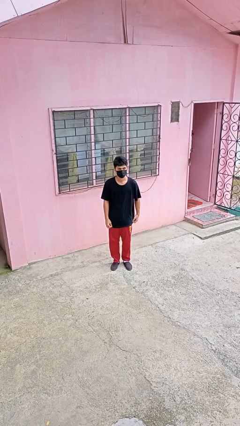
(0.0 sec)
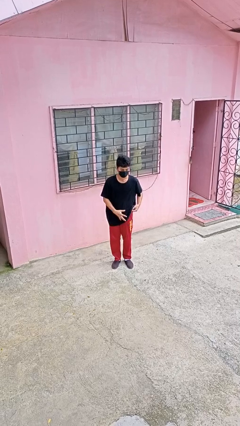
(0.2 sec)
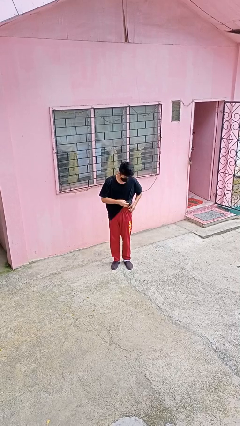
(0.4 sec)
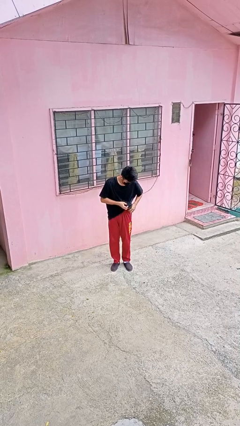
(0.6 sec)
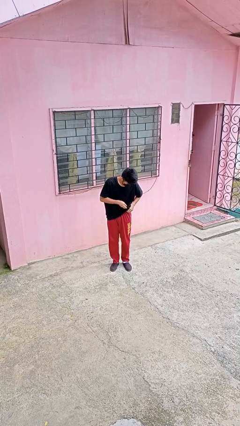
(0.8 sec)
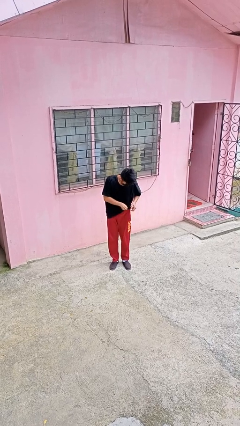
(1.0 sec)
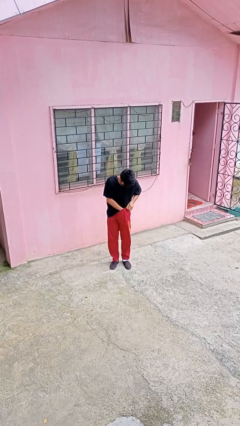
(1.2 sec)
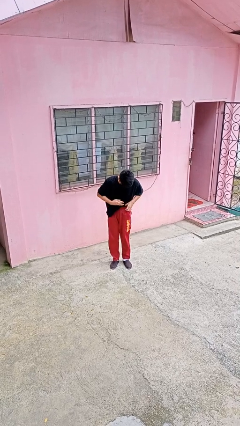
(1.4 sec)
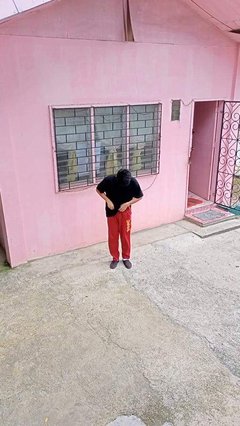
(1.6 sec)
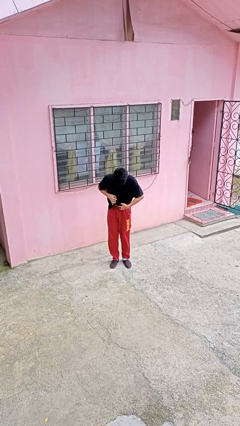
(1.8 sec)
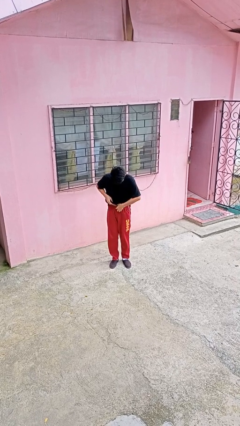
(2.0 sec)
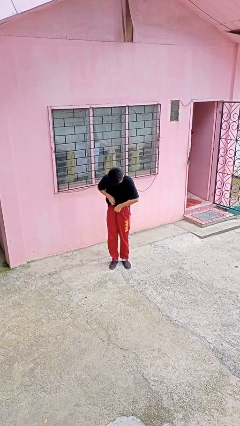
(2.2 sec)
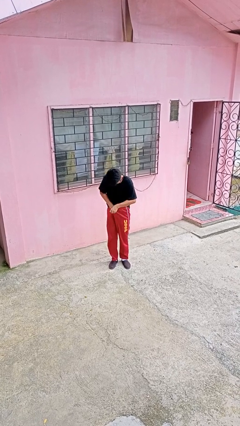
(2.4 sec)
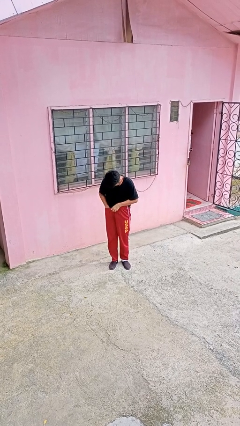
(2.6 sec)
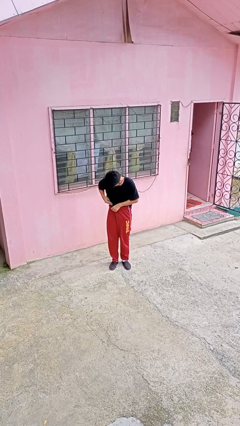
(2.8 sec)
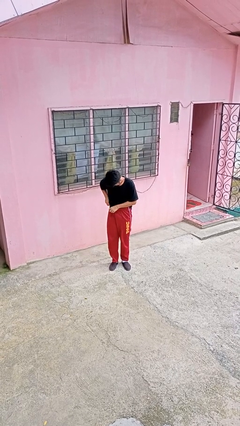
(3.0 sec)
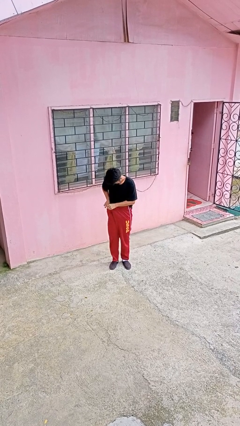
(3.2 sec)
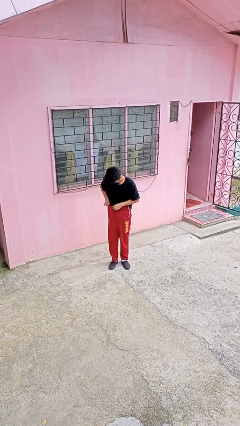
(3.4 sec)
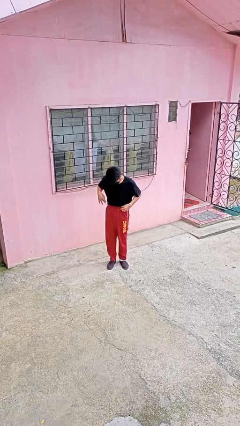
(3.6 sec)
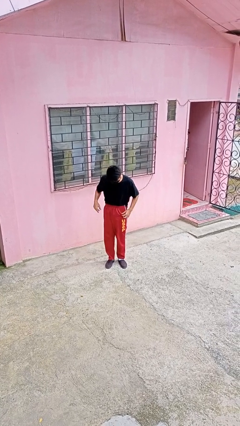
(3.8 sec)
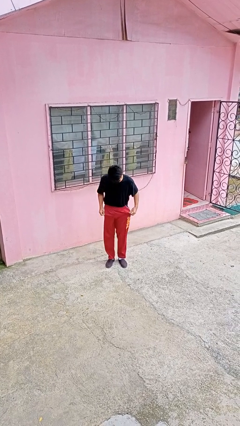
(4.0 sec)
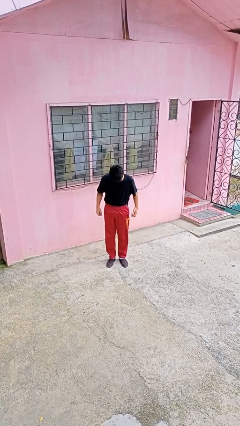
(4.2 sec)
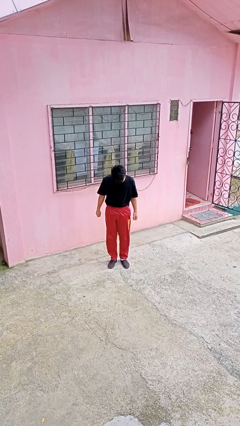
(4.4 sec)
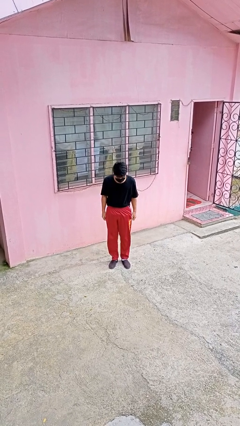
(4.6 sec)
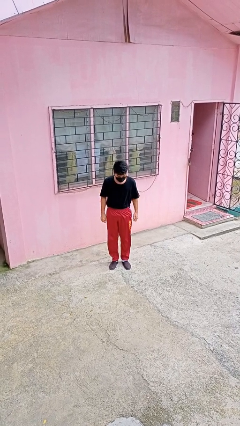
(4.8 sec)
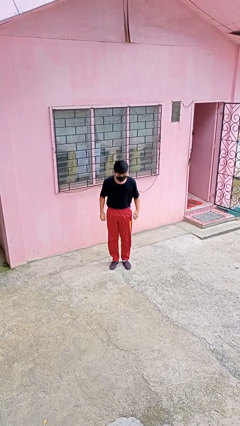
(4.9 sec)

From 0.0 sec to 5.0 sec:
person tucks in shirt

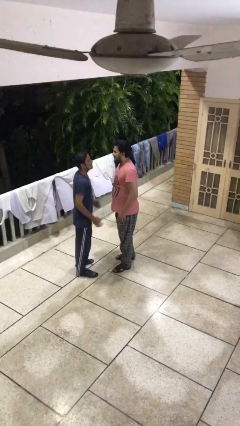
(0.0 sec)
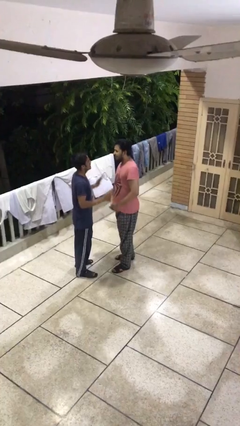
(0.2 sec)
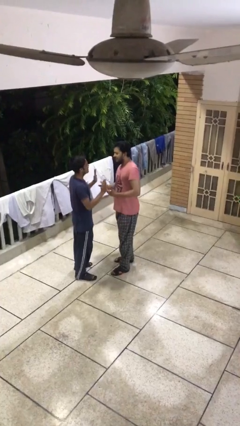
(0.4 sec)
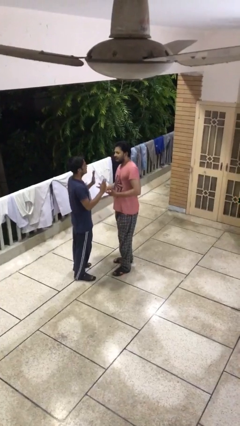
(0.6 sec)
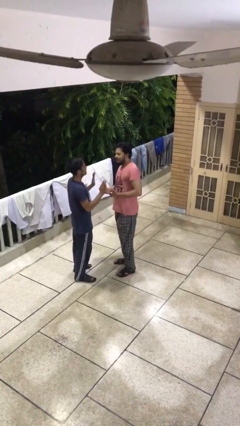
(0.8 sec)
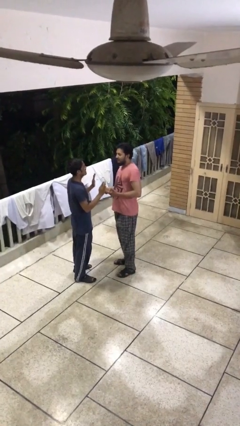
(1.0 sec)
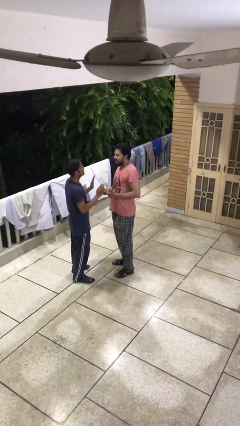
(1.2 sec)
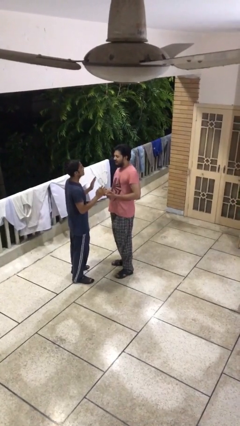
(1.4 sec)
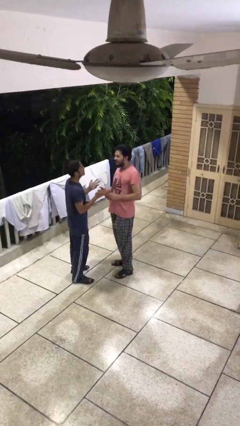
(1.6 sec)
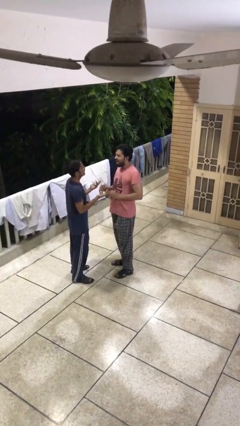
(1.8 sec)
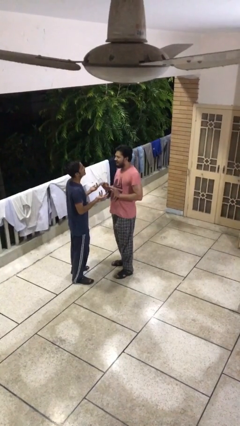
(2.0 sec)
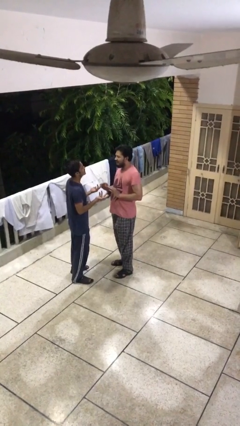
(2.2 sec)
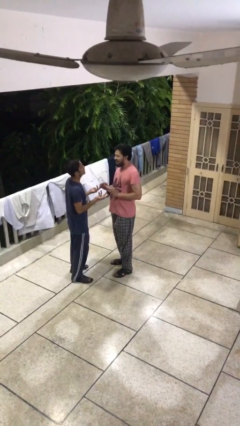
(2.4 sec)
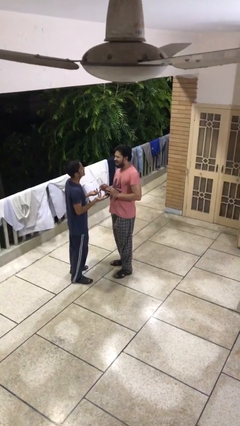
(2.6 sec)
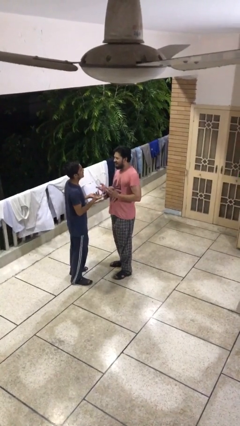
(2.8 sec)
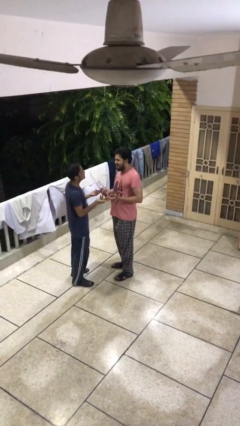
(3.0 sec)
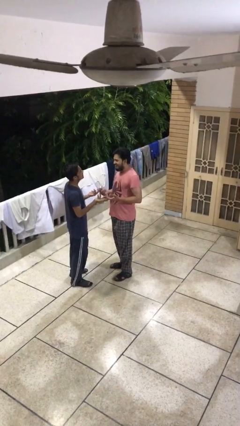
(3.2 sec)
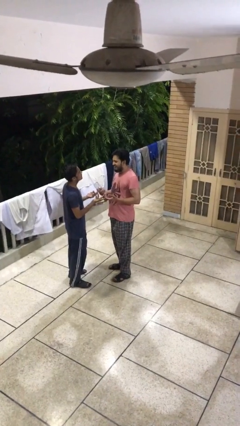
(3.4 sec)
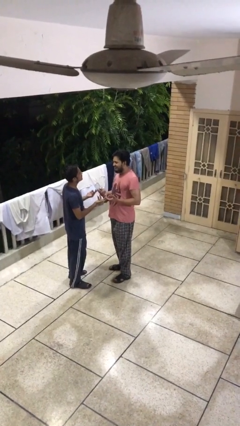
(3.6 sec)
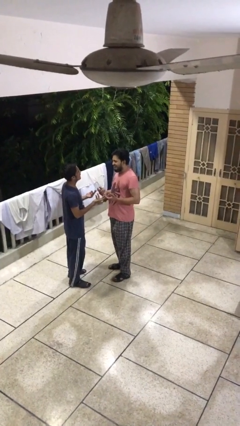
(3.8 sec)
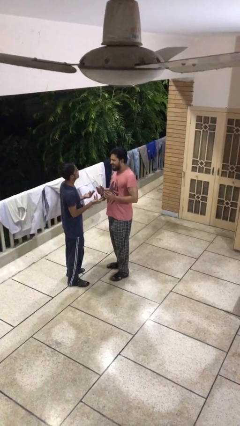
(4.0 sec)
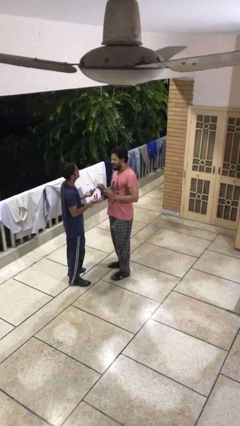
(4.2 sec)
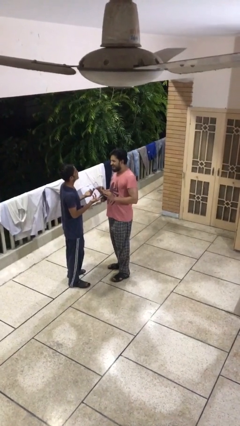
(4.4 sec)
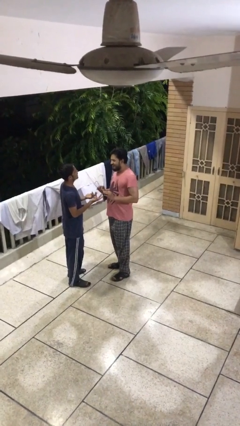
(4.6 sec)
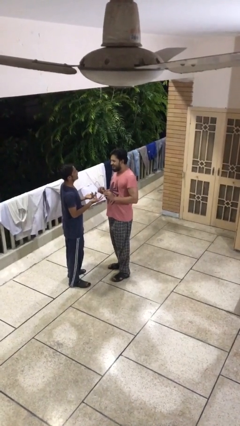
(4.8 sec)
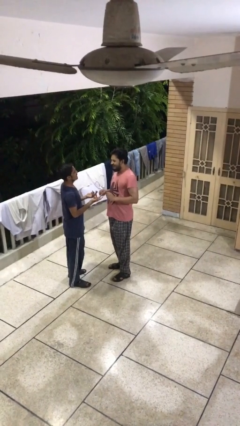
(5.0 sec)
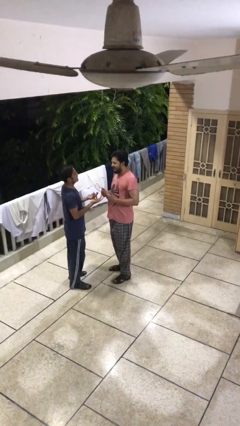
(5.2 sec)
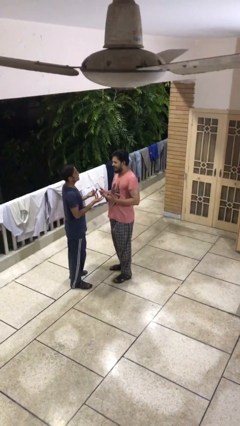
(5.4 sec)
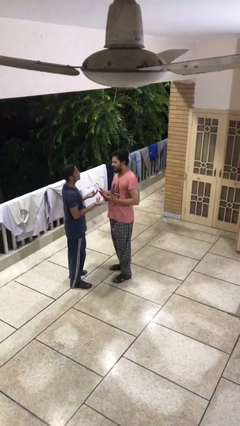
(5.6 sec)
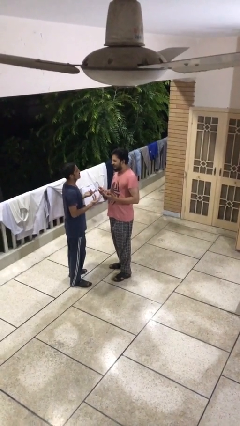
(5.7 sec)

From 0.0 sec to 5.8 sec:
person talks to person

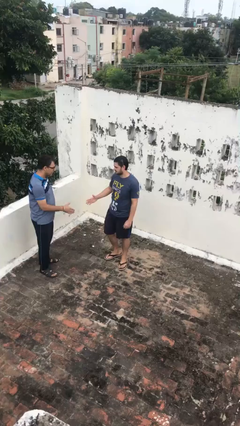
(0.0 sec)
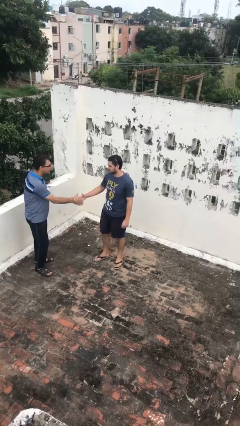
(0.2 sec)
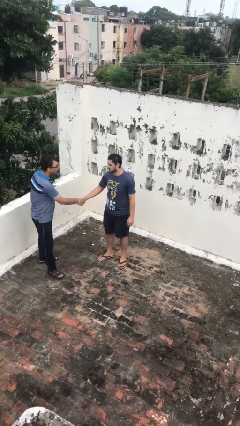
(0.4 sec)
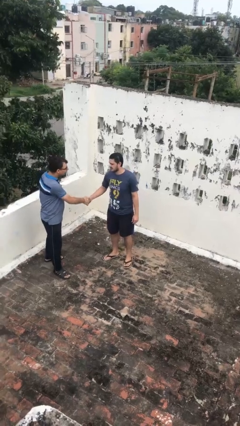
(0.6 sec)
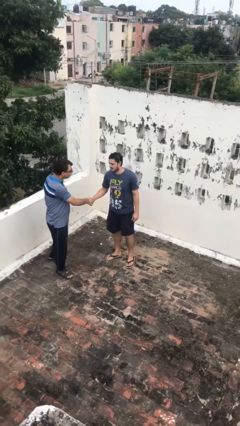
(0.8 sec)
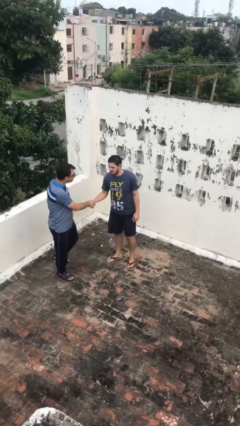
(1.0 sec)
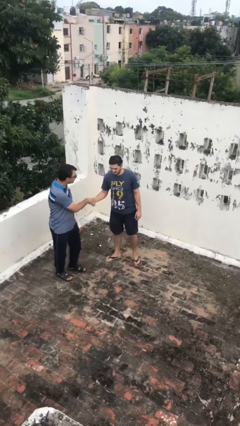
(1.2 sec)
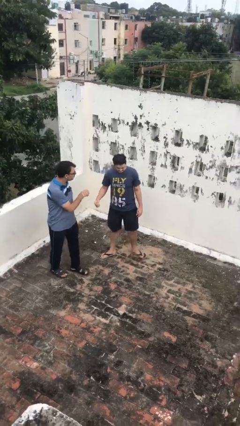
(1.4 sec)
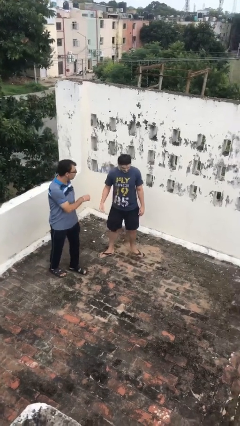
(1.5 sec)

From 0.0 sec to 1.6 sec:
person shakes hand

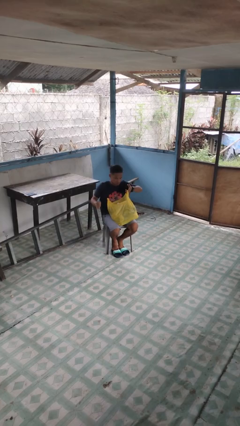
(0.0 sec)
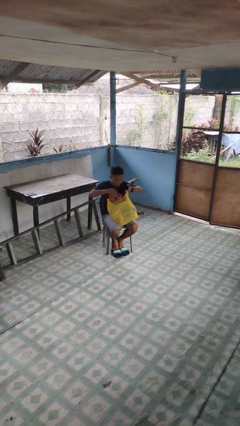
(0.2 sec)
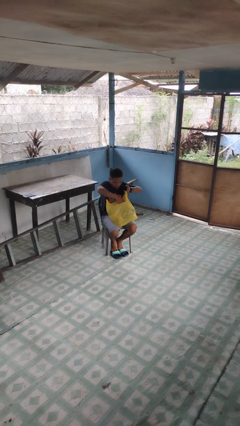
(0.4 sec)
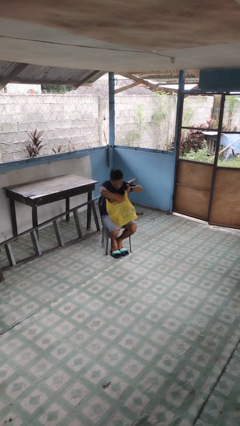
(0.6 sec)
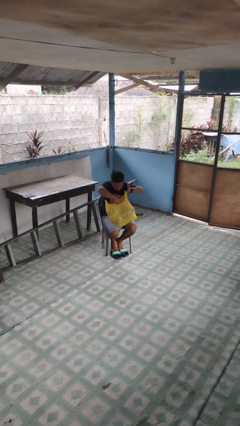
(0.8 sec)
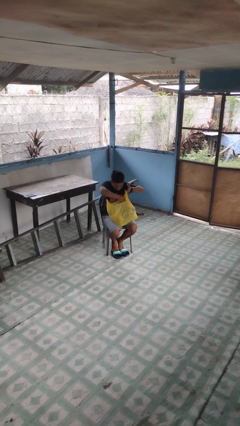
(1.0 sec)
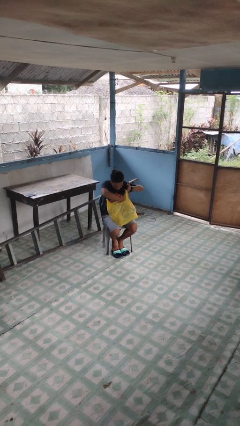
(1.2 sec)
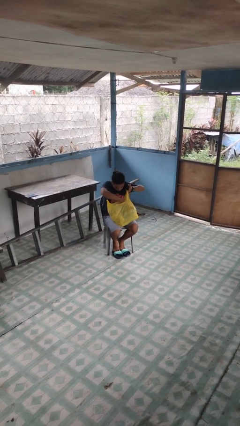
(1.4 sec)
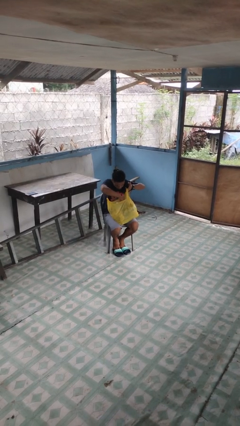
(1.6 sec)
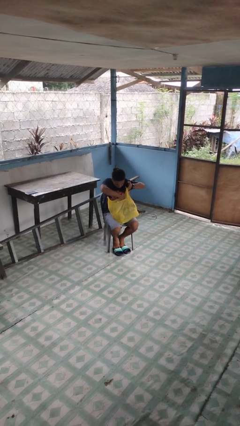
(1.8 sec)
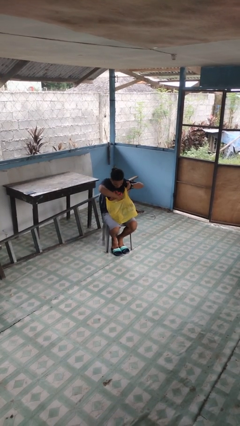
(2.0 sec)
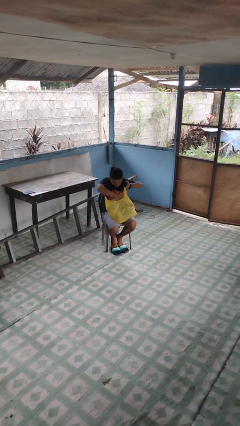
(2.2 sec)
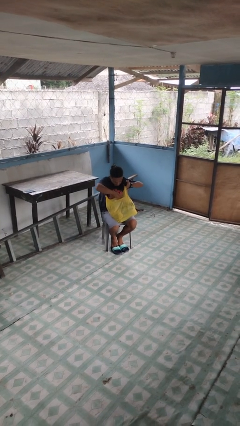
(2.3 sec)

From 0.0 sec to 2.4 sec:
person searches in bag

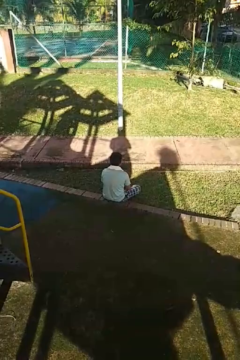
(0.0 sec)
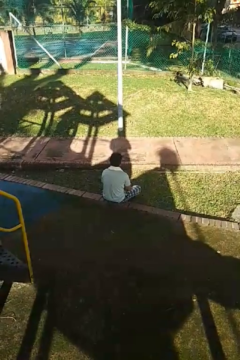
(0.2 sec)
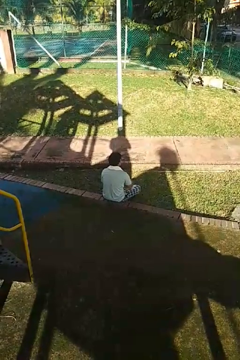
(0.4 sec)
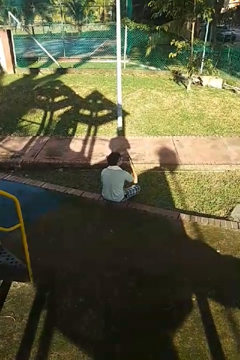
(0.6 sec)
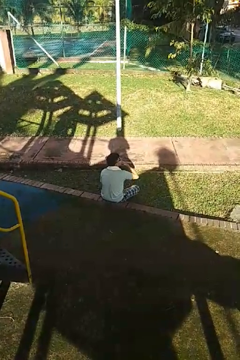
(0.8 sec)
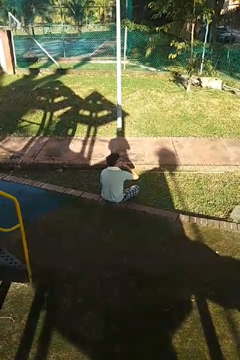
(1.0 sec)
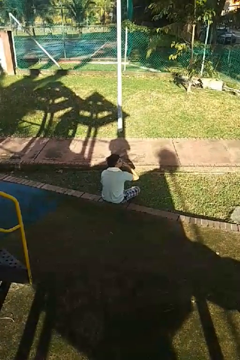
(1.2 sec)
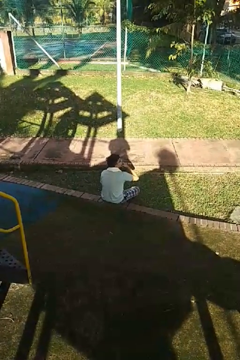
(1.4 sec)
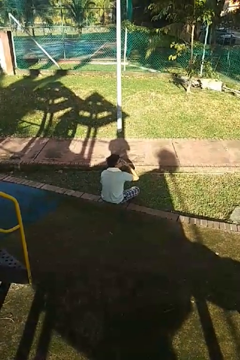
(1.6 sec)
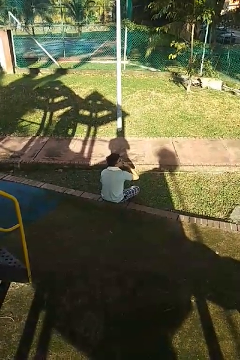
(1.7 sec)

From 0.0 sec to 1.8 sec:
person strokes chin

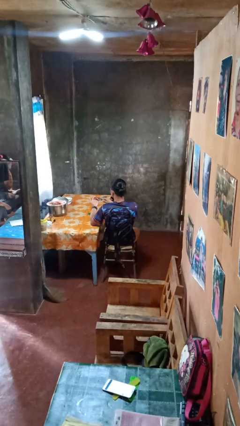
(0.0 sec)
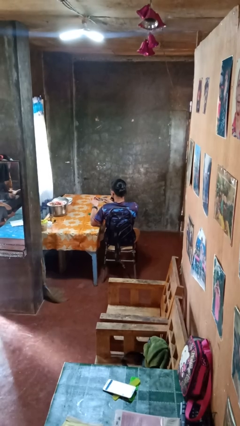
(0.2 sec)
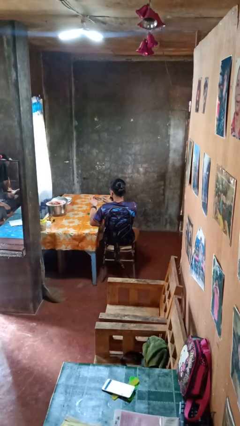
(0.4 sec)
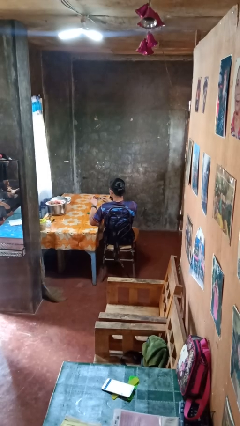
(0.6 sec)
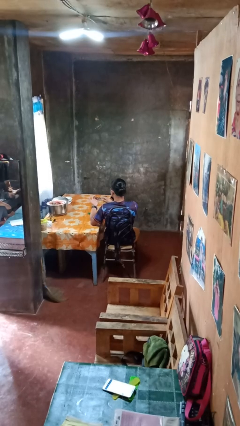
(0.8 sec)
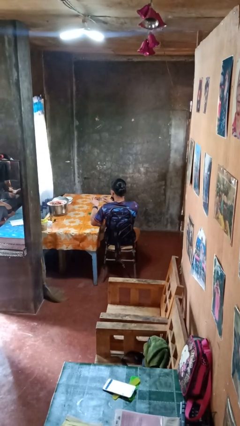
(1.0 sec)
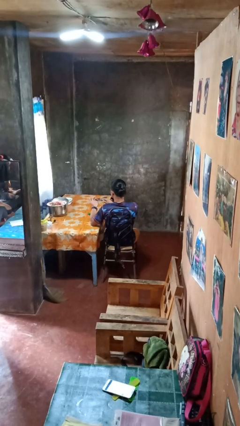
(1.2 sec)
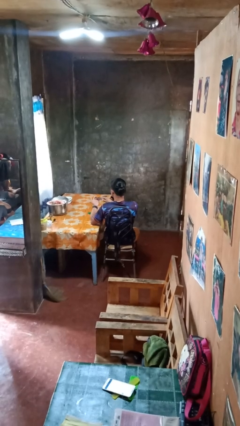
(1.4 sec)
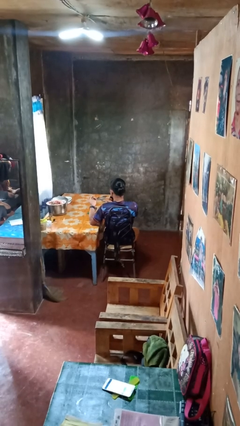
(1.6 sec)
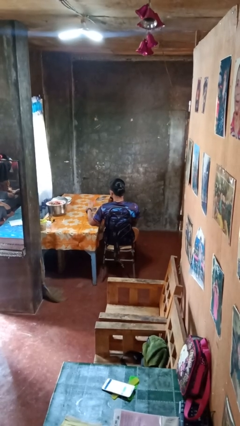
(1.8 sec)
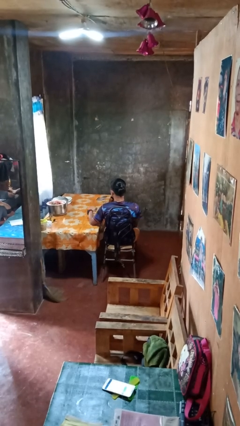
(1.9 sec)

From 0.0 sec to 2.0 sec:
person files fingernails
